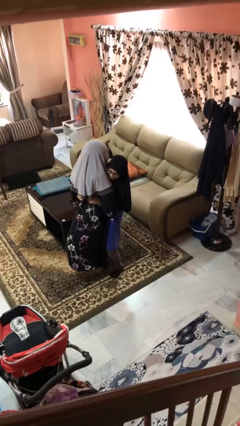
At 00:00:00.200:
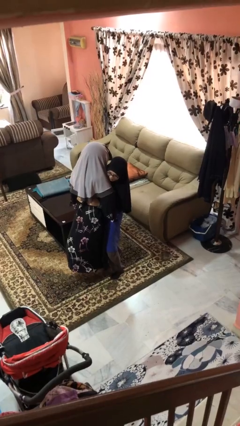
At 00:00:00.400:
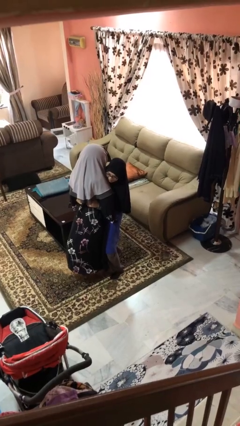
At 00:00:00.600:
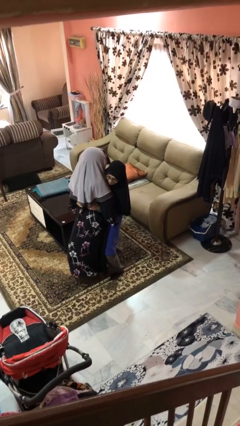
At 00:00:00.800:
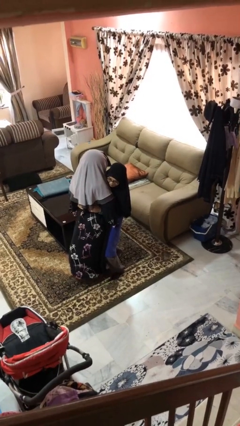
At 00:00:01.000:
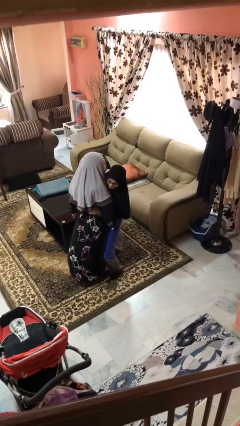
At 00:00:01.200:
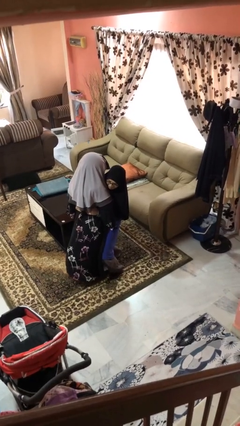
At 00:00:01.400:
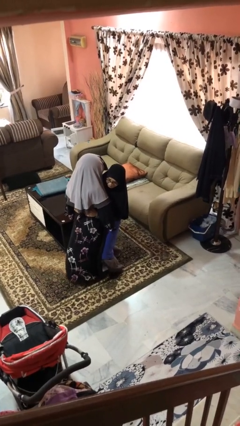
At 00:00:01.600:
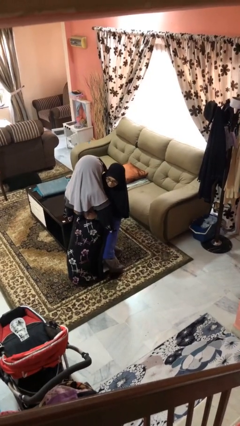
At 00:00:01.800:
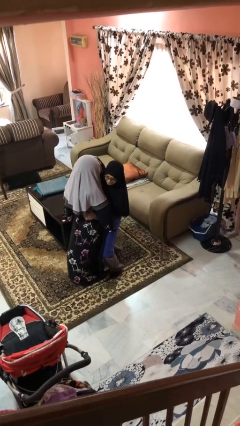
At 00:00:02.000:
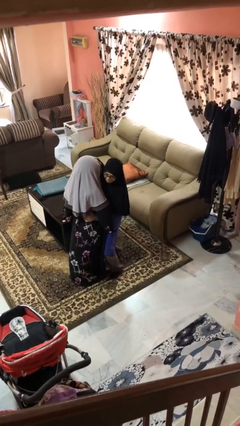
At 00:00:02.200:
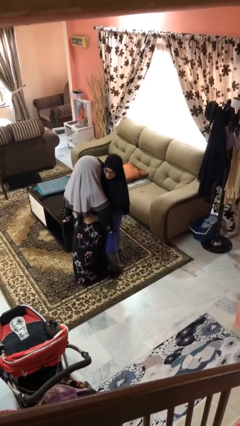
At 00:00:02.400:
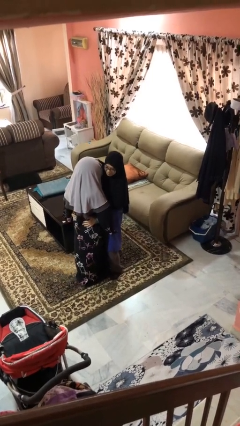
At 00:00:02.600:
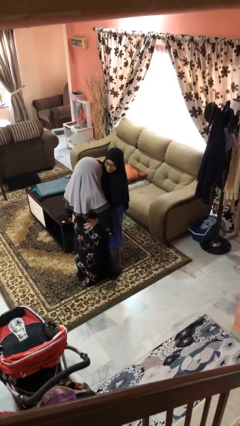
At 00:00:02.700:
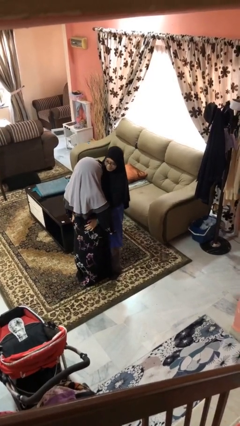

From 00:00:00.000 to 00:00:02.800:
person puts down person

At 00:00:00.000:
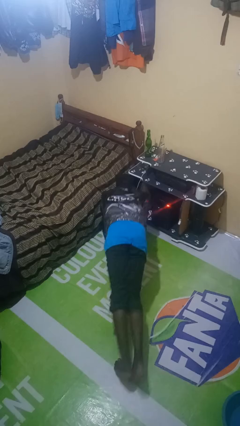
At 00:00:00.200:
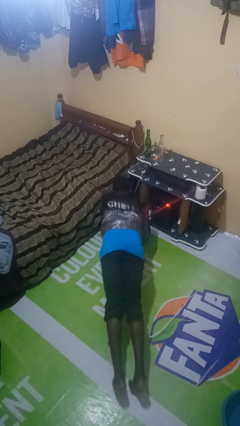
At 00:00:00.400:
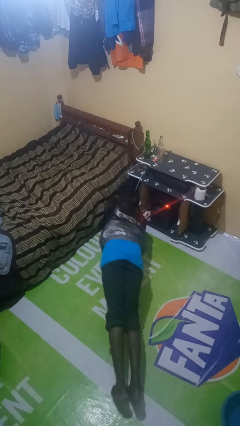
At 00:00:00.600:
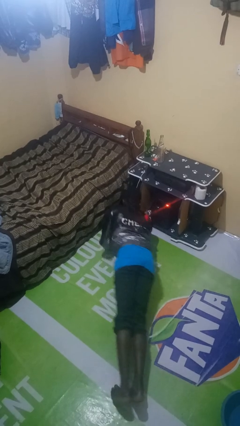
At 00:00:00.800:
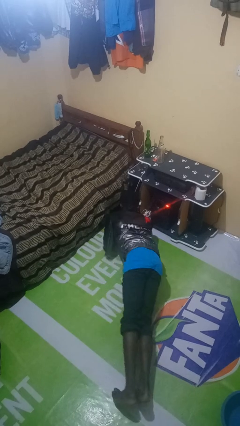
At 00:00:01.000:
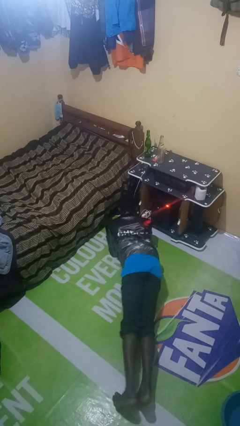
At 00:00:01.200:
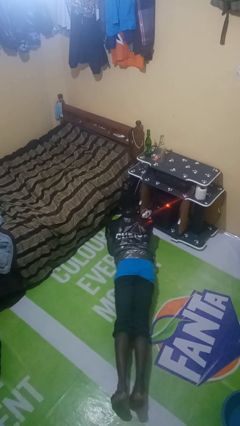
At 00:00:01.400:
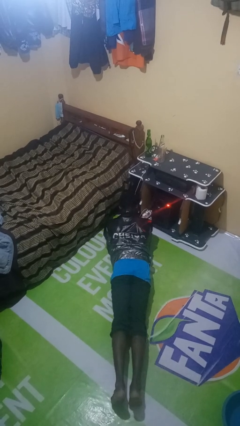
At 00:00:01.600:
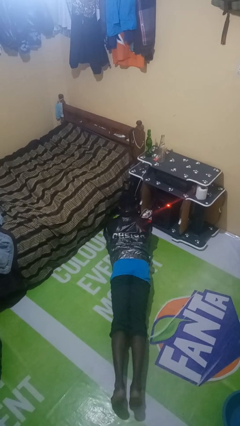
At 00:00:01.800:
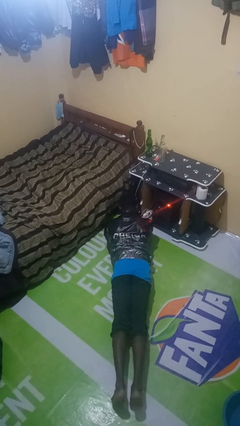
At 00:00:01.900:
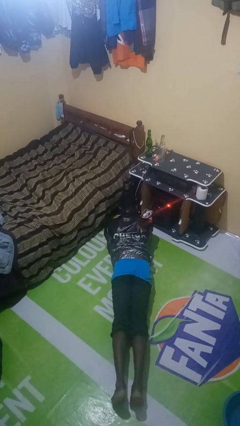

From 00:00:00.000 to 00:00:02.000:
person exercises with plank

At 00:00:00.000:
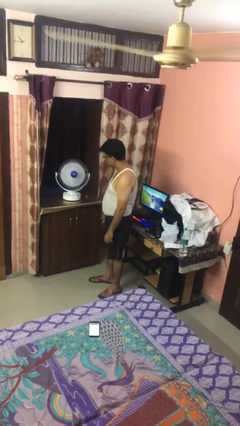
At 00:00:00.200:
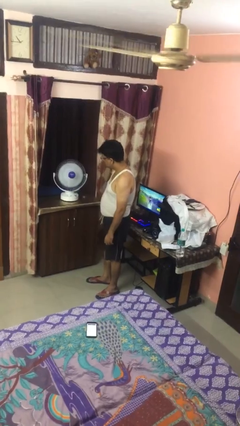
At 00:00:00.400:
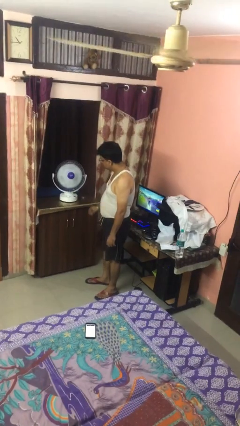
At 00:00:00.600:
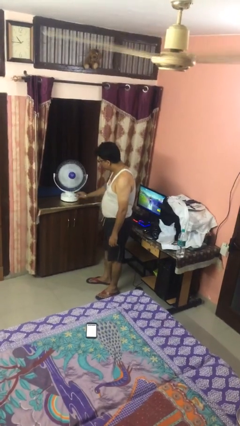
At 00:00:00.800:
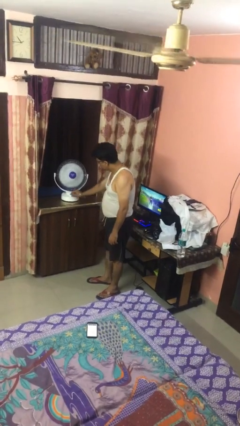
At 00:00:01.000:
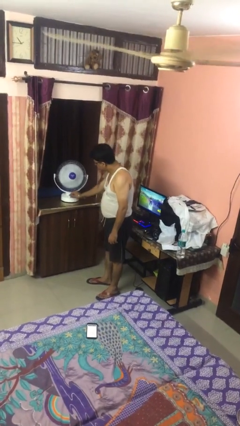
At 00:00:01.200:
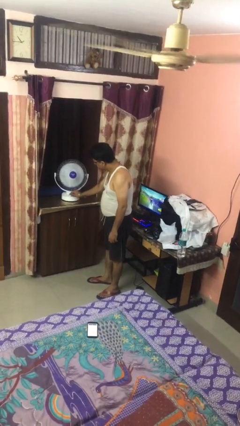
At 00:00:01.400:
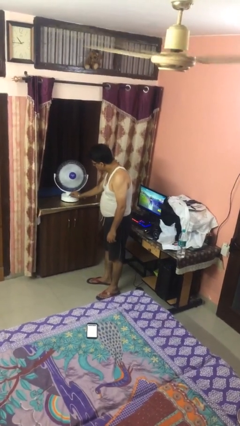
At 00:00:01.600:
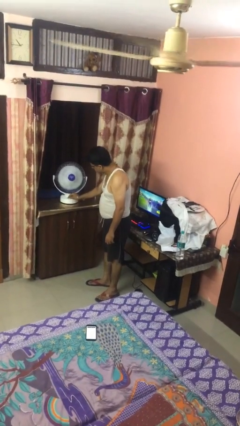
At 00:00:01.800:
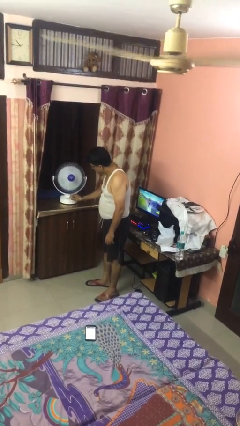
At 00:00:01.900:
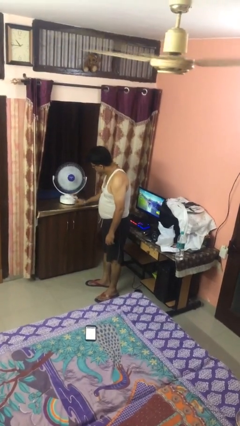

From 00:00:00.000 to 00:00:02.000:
person turns off fan

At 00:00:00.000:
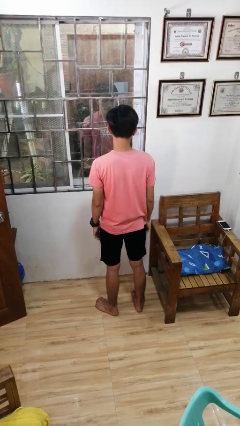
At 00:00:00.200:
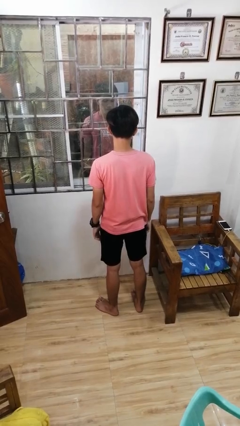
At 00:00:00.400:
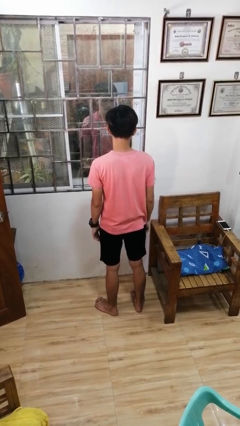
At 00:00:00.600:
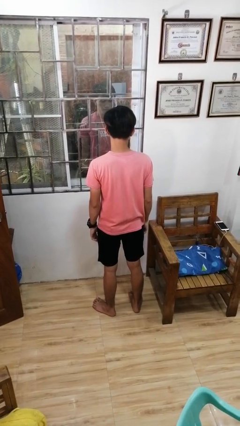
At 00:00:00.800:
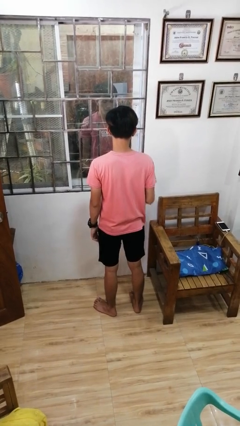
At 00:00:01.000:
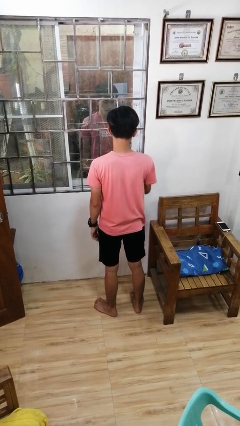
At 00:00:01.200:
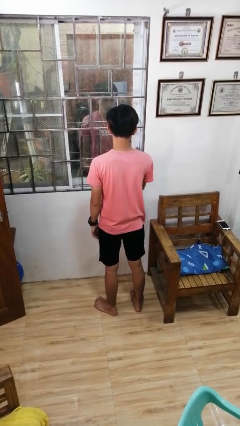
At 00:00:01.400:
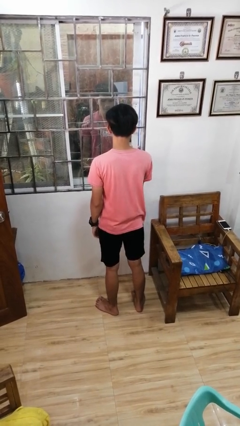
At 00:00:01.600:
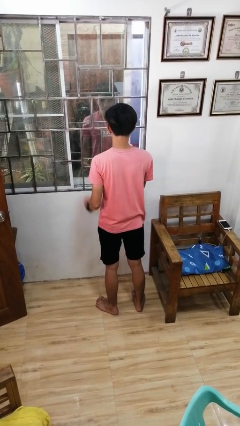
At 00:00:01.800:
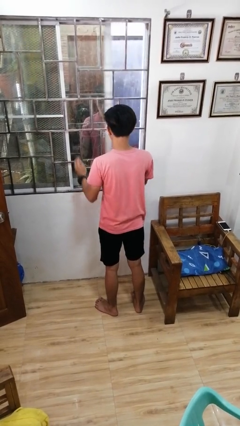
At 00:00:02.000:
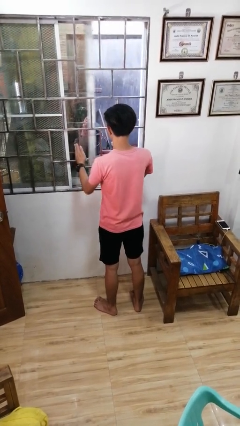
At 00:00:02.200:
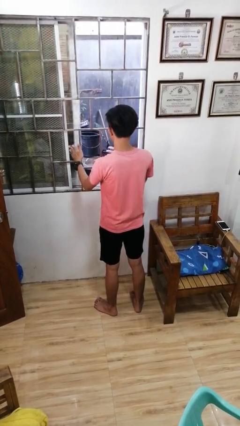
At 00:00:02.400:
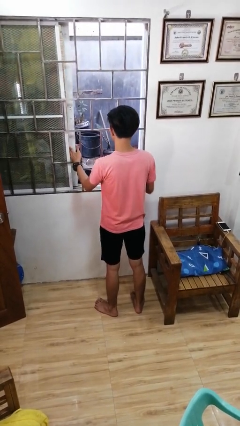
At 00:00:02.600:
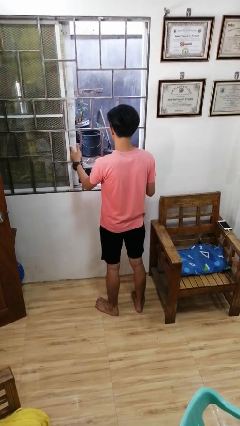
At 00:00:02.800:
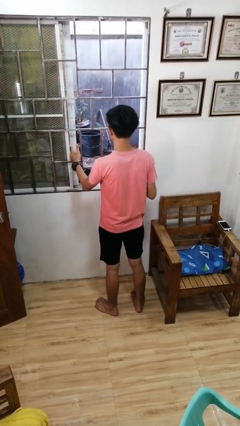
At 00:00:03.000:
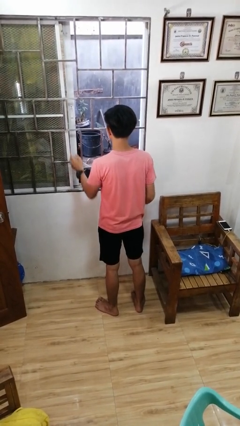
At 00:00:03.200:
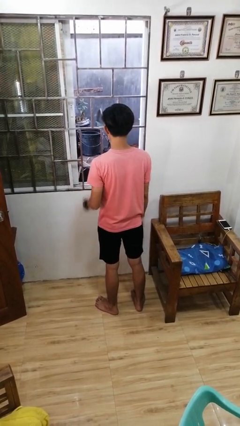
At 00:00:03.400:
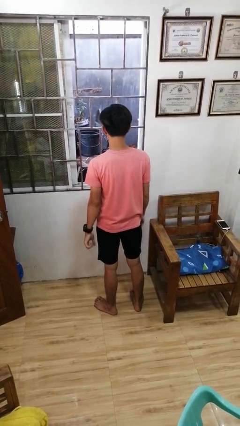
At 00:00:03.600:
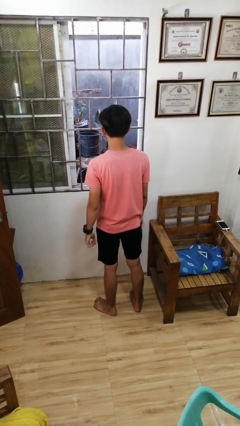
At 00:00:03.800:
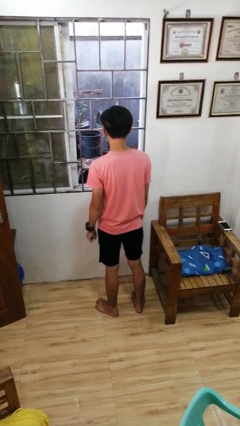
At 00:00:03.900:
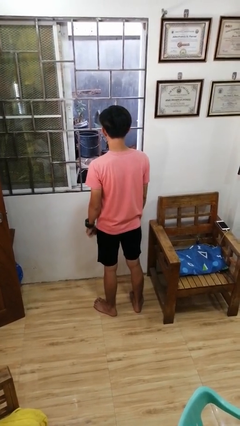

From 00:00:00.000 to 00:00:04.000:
person opens home window

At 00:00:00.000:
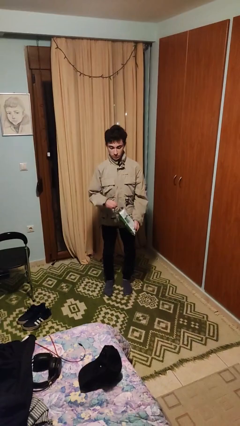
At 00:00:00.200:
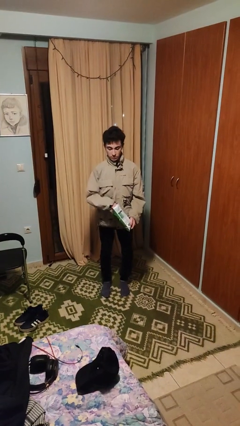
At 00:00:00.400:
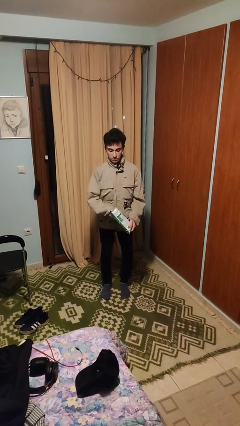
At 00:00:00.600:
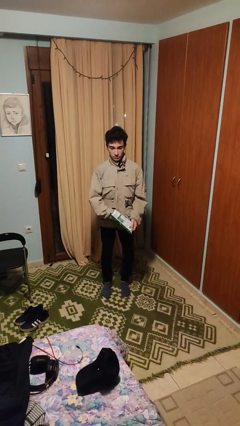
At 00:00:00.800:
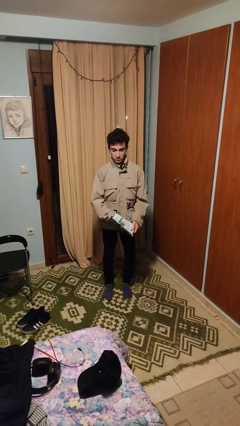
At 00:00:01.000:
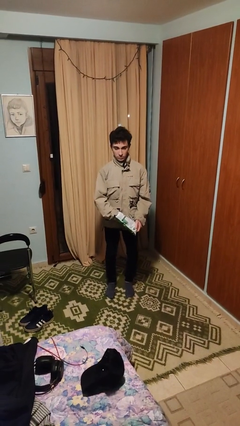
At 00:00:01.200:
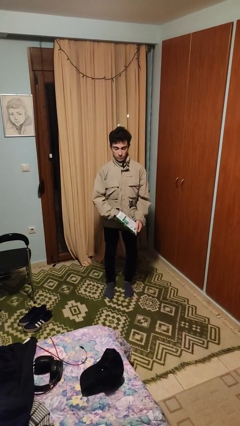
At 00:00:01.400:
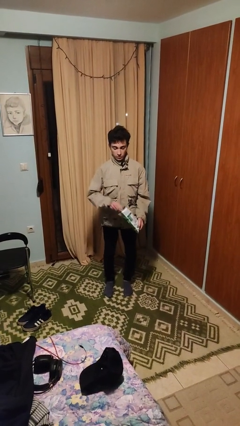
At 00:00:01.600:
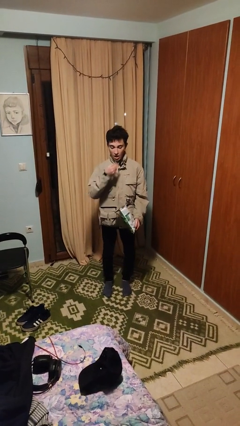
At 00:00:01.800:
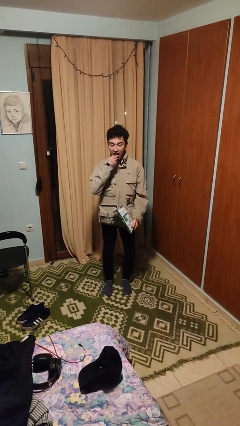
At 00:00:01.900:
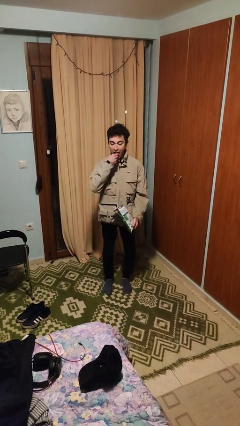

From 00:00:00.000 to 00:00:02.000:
person eats snack from bag

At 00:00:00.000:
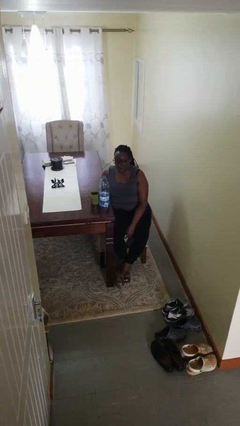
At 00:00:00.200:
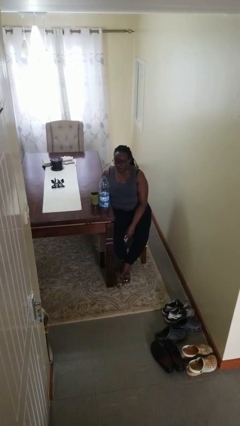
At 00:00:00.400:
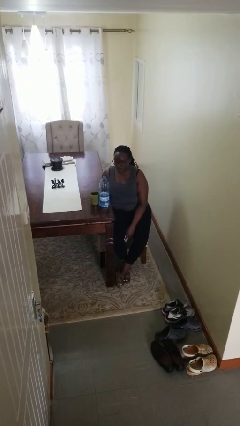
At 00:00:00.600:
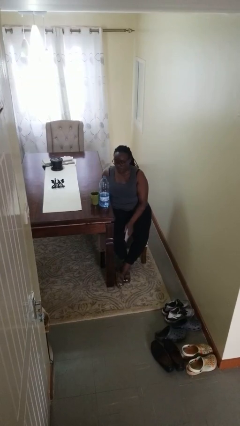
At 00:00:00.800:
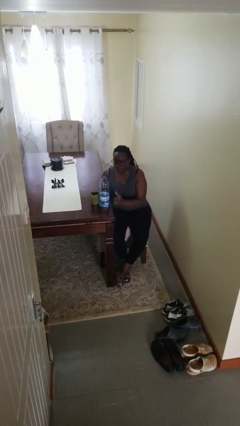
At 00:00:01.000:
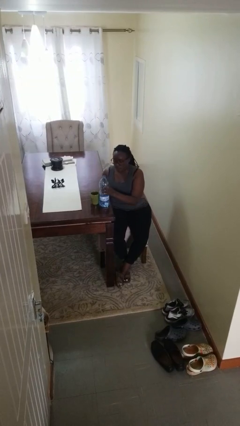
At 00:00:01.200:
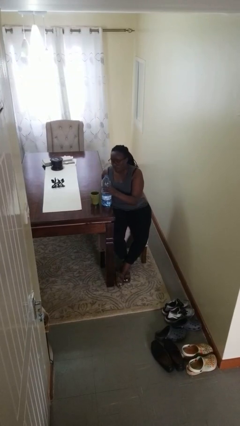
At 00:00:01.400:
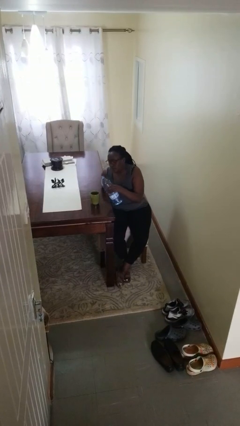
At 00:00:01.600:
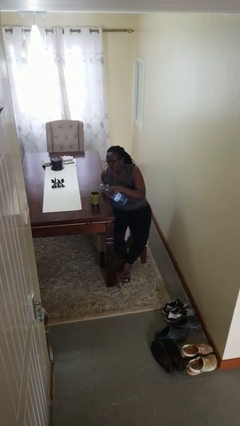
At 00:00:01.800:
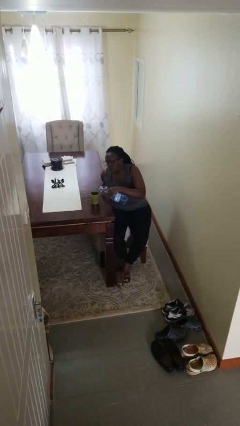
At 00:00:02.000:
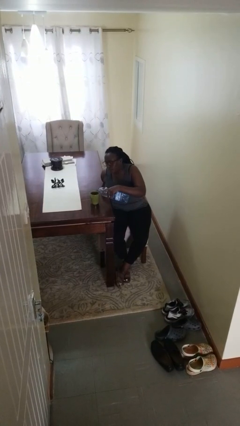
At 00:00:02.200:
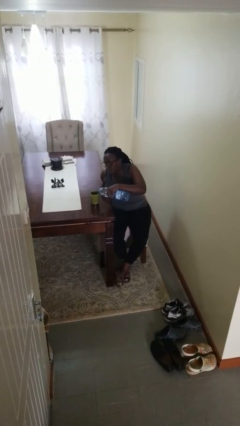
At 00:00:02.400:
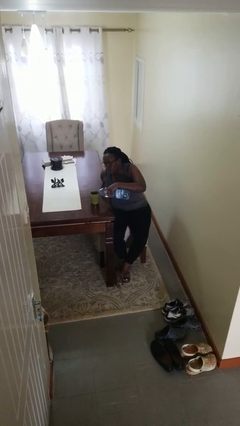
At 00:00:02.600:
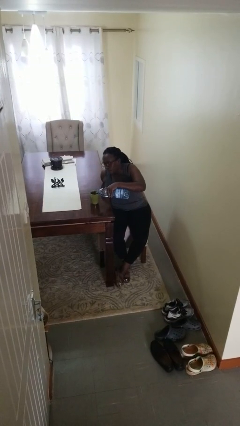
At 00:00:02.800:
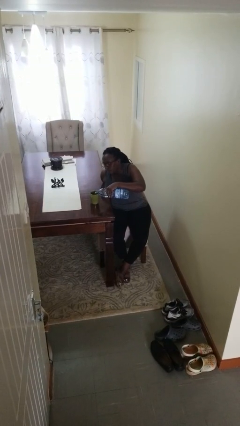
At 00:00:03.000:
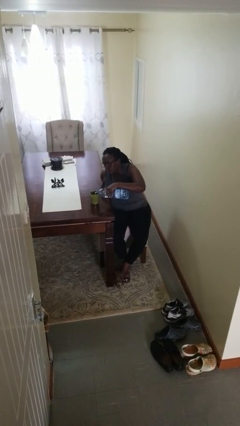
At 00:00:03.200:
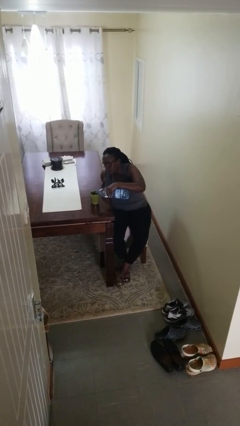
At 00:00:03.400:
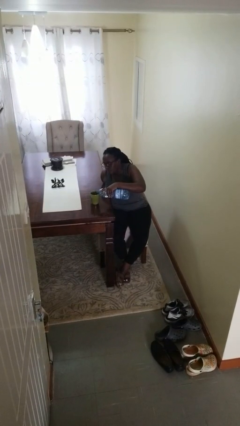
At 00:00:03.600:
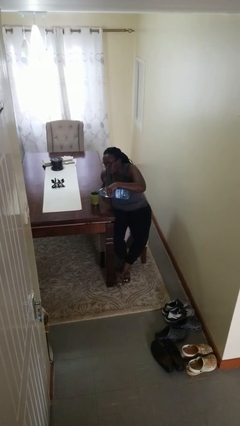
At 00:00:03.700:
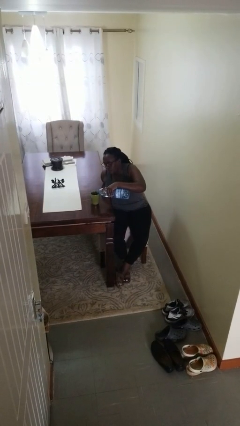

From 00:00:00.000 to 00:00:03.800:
person pours liquid into cup

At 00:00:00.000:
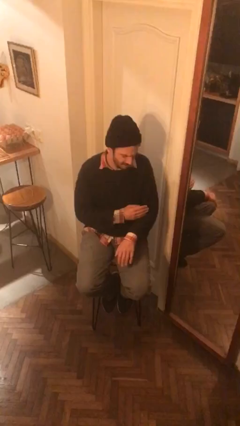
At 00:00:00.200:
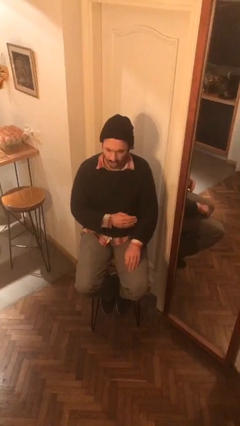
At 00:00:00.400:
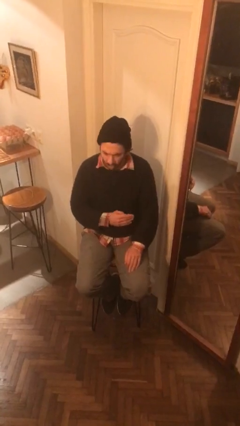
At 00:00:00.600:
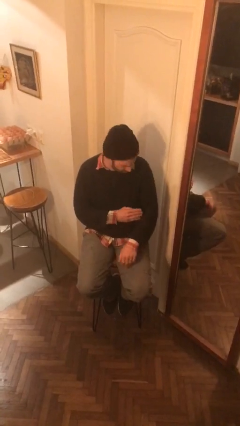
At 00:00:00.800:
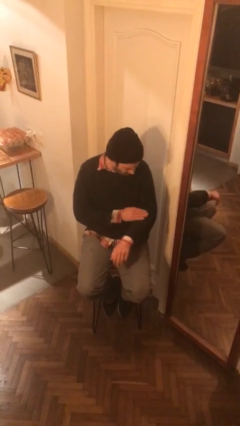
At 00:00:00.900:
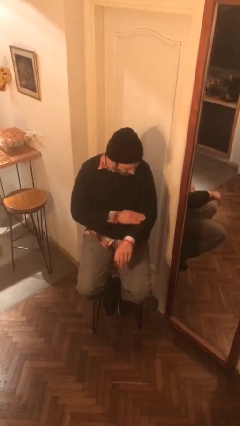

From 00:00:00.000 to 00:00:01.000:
person swats bug
